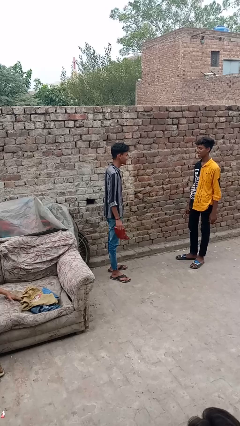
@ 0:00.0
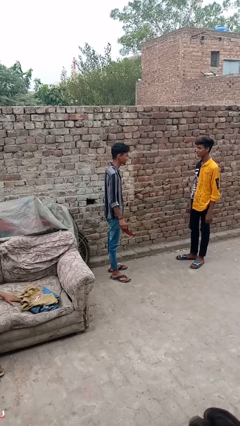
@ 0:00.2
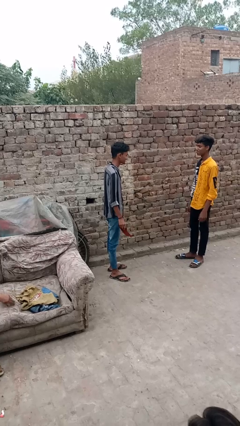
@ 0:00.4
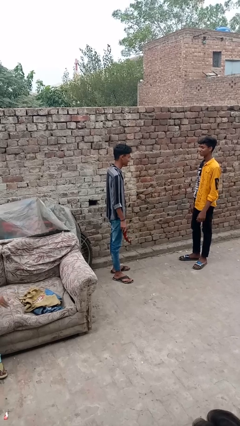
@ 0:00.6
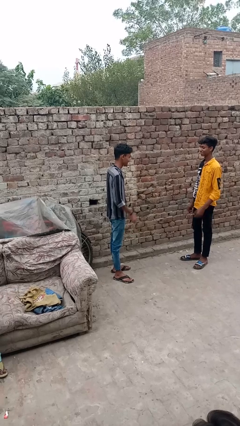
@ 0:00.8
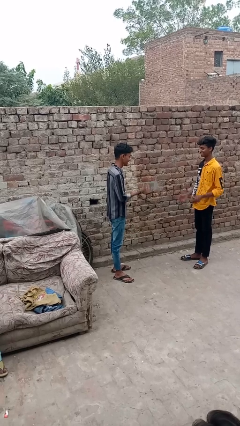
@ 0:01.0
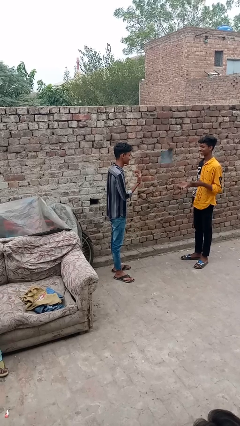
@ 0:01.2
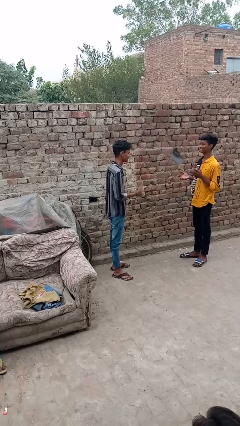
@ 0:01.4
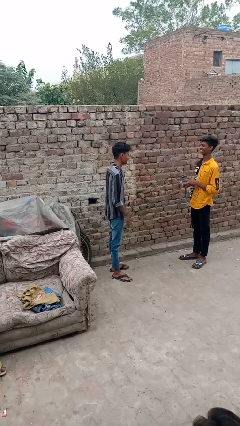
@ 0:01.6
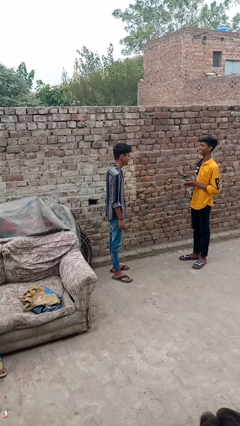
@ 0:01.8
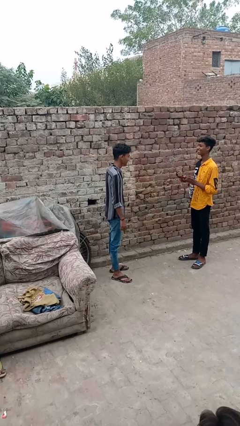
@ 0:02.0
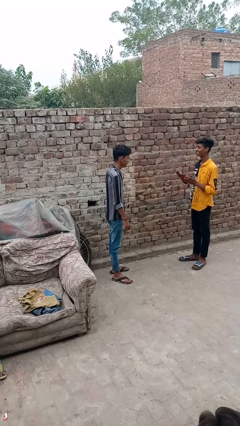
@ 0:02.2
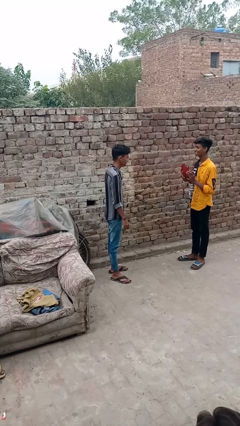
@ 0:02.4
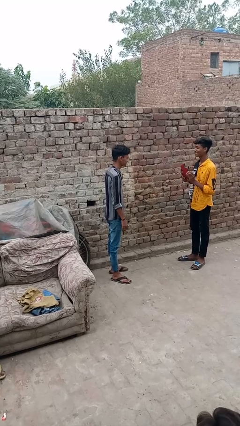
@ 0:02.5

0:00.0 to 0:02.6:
person throws object to person

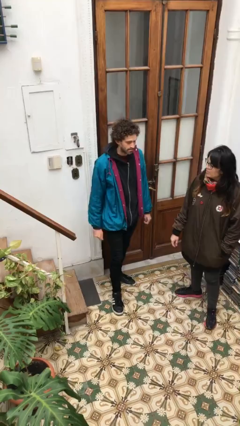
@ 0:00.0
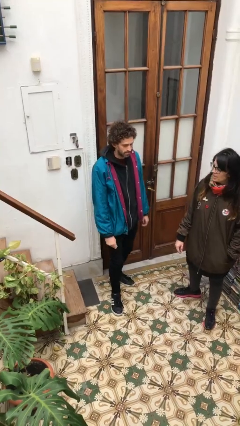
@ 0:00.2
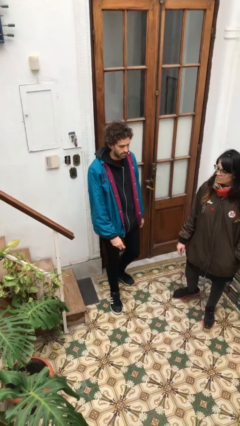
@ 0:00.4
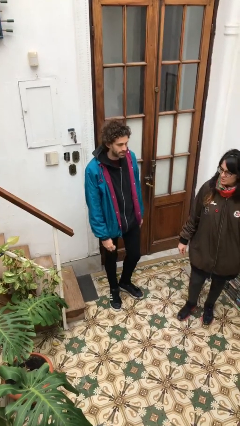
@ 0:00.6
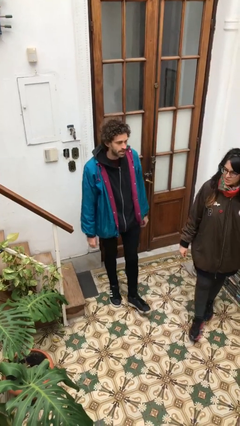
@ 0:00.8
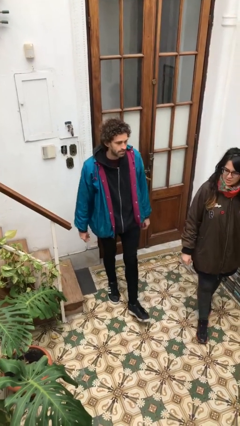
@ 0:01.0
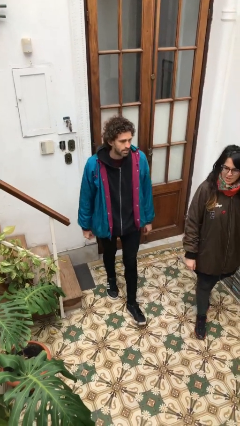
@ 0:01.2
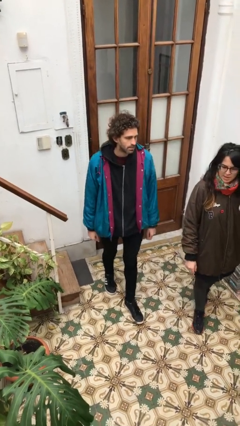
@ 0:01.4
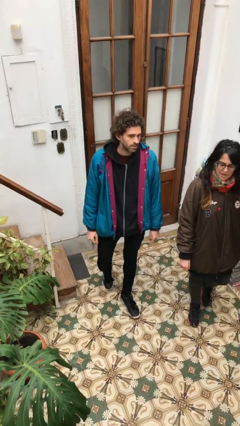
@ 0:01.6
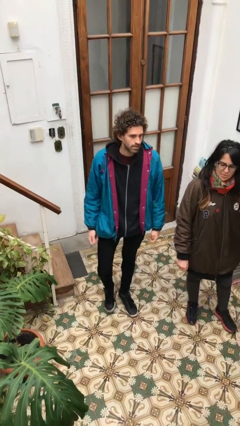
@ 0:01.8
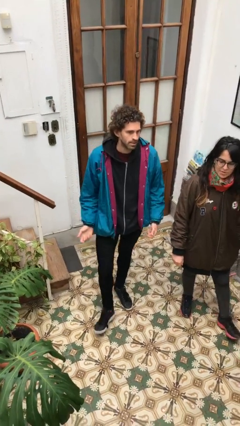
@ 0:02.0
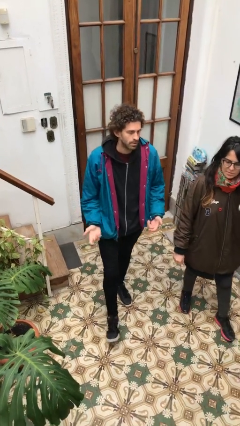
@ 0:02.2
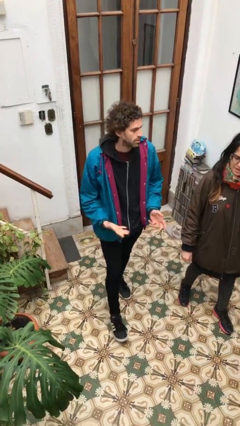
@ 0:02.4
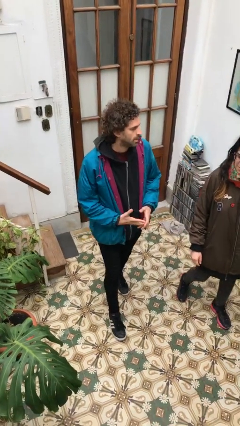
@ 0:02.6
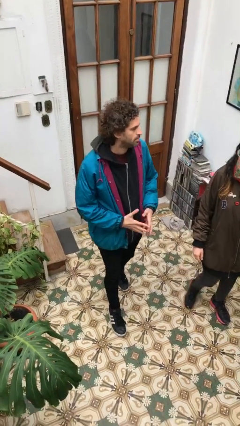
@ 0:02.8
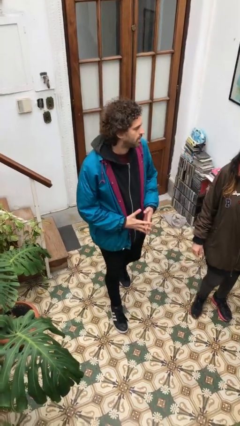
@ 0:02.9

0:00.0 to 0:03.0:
person talks to person

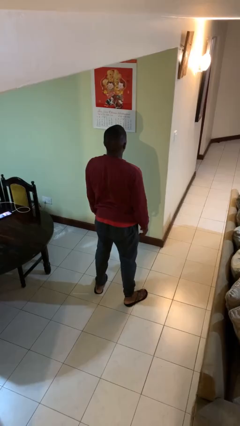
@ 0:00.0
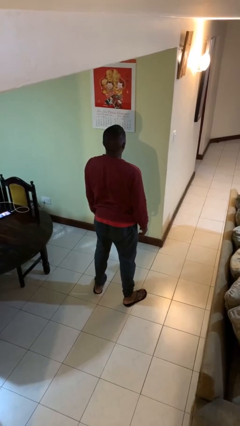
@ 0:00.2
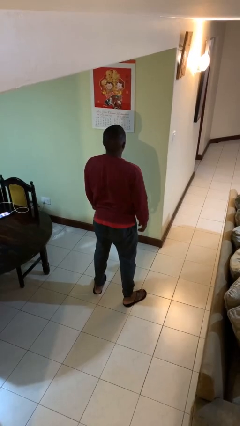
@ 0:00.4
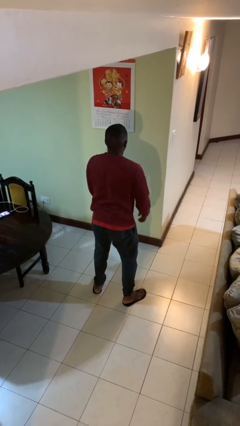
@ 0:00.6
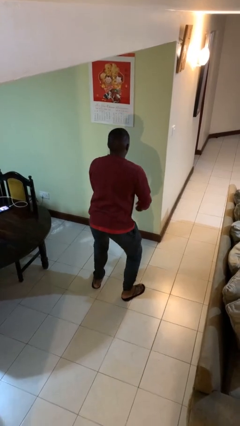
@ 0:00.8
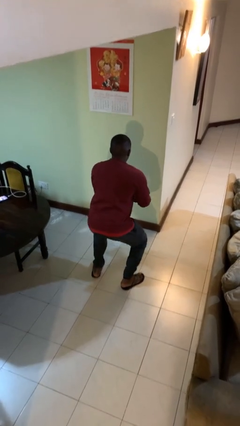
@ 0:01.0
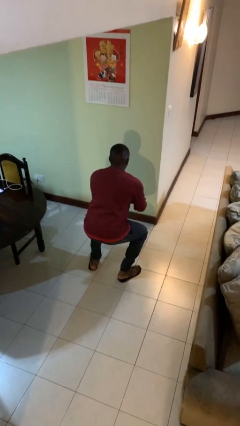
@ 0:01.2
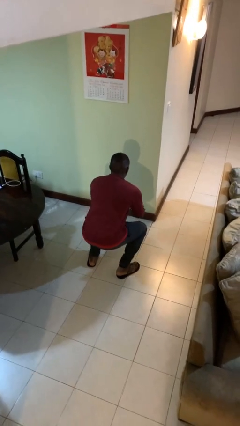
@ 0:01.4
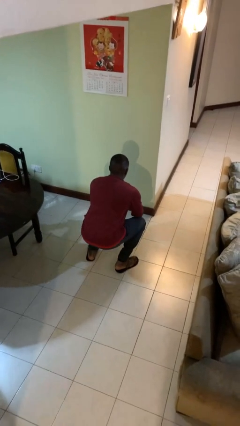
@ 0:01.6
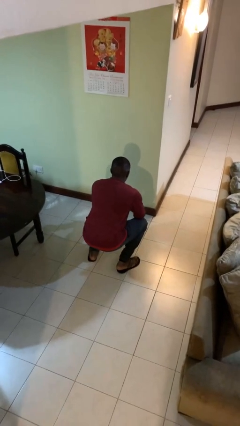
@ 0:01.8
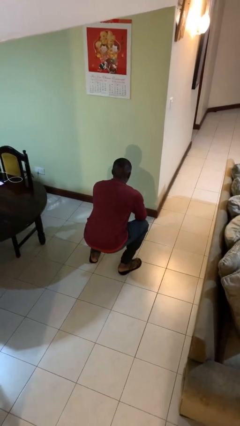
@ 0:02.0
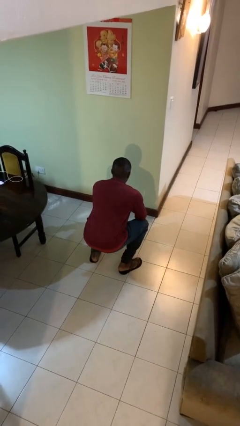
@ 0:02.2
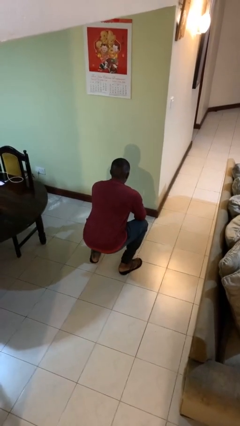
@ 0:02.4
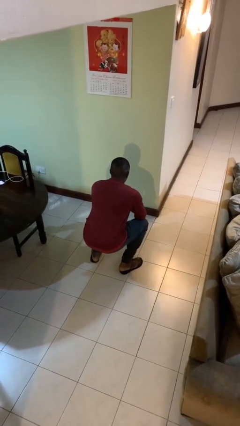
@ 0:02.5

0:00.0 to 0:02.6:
person squats

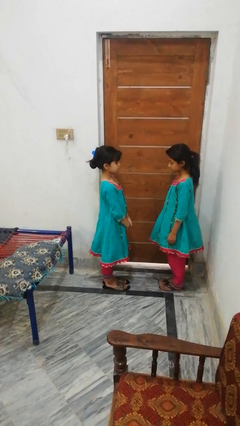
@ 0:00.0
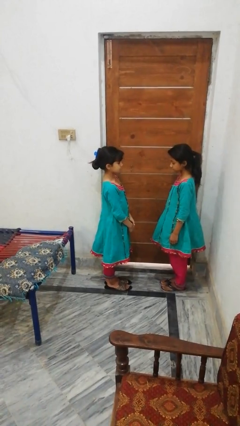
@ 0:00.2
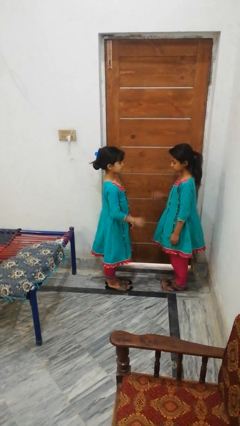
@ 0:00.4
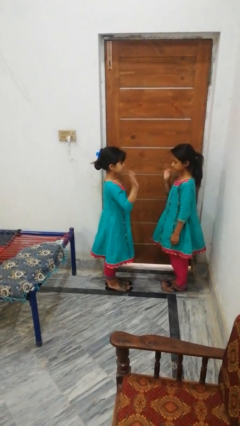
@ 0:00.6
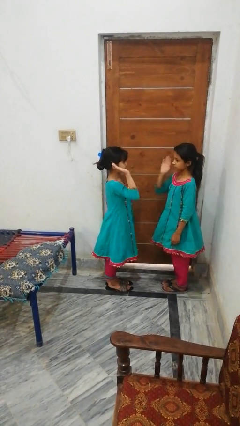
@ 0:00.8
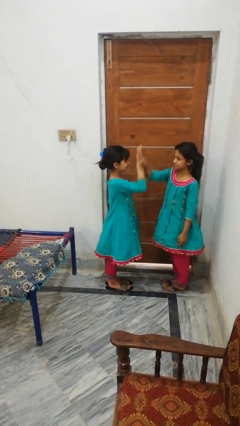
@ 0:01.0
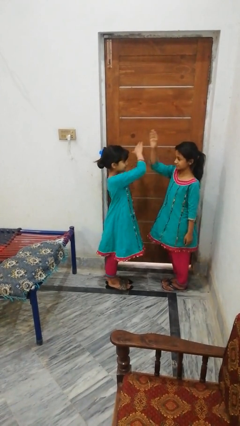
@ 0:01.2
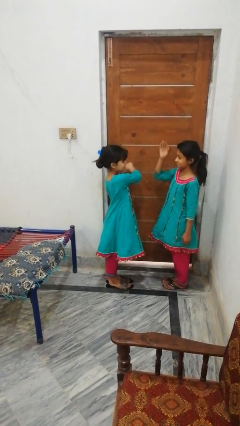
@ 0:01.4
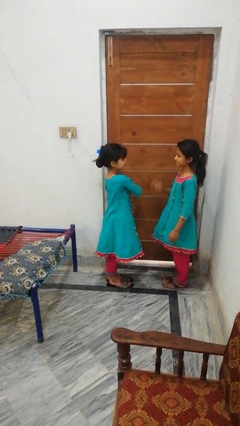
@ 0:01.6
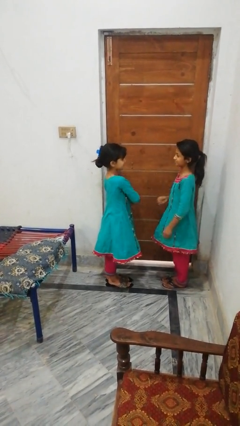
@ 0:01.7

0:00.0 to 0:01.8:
person highfives hand

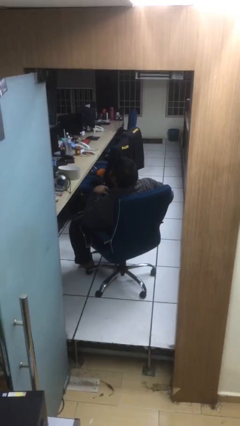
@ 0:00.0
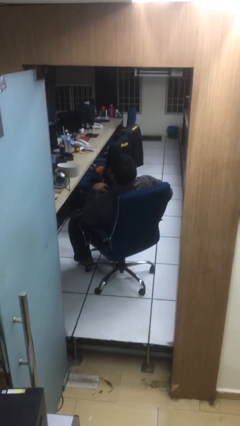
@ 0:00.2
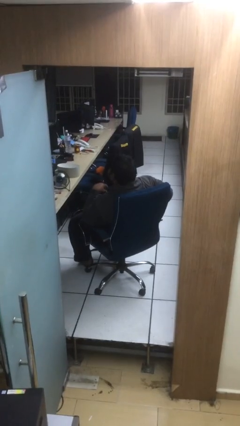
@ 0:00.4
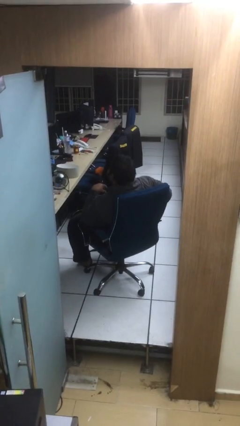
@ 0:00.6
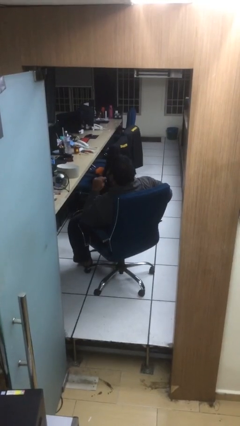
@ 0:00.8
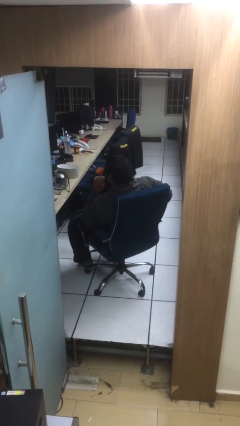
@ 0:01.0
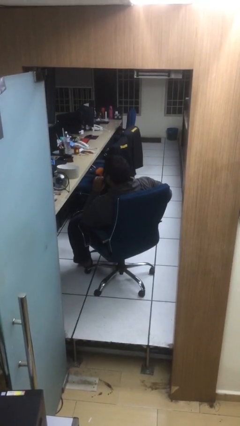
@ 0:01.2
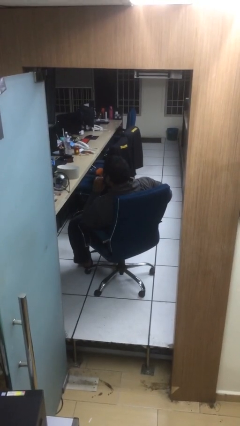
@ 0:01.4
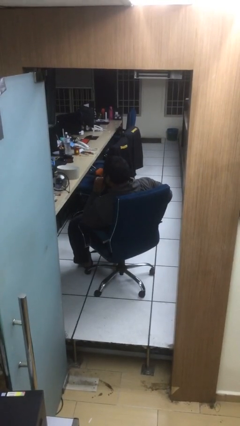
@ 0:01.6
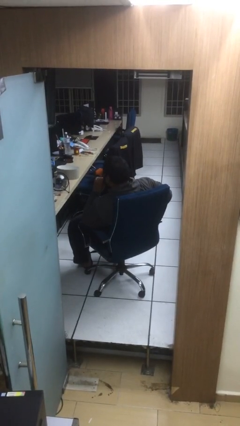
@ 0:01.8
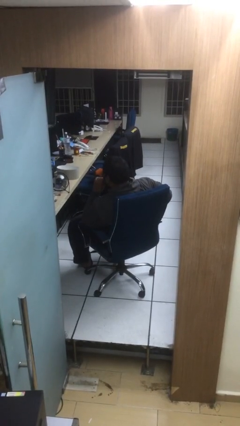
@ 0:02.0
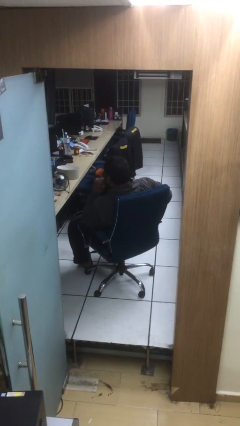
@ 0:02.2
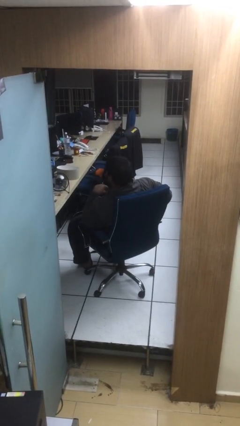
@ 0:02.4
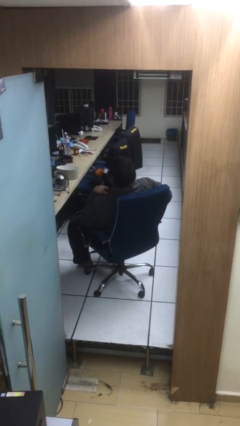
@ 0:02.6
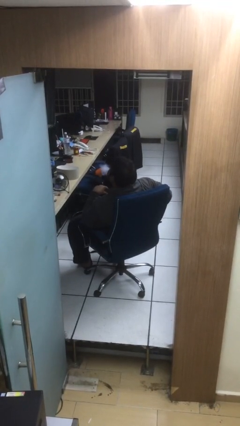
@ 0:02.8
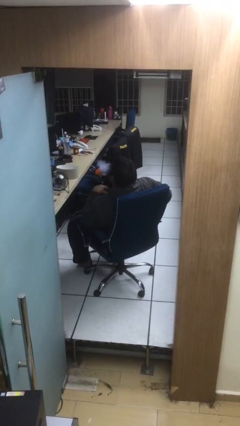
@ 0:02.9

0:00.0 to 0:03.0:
person vapes

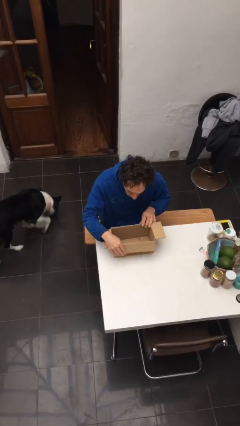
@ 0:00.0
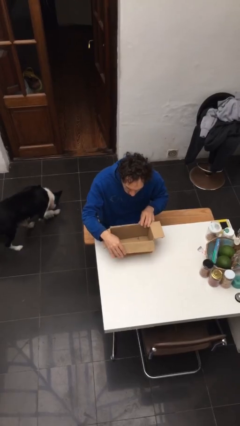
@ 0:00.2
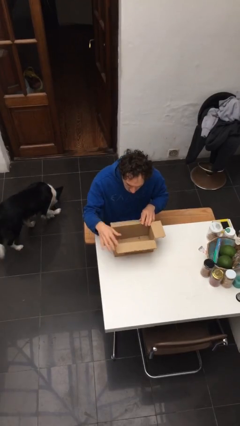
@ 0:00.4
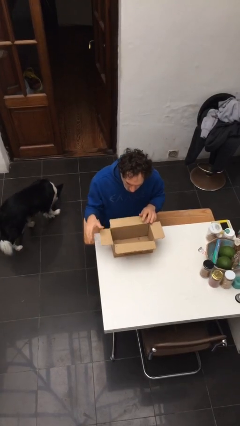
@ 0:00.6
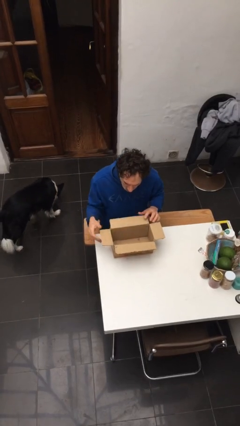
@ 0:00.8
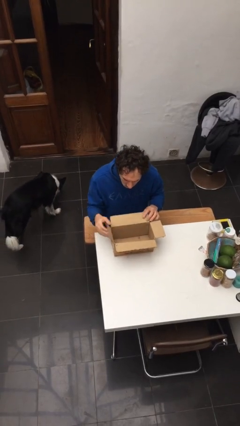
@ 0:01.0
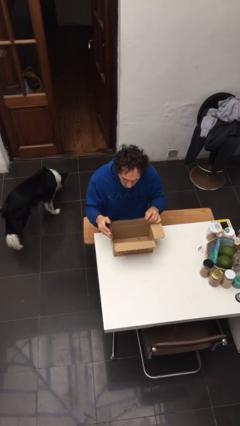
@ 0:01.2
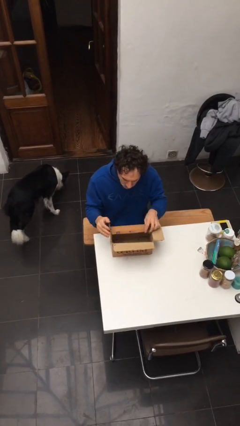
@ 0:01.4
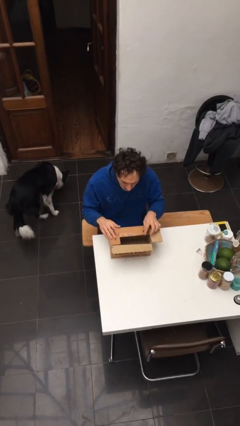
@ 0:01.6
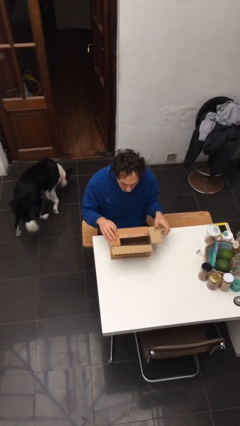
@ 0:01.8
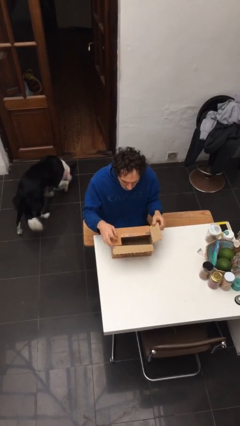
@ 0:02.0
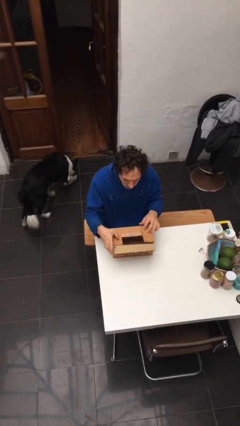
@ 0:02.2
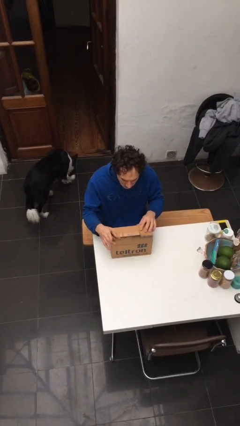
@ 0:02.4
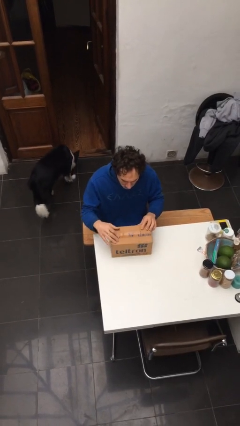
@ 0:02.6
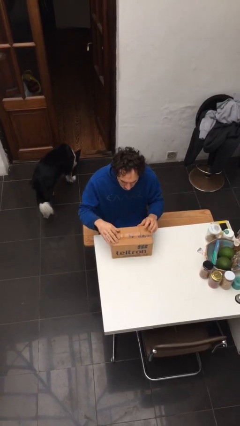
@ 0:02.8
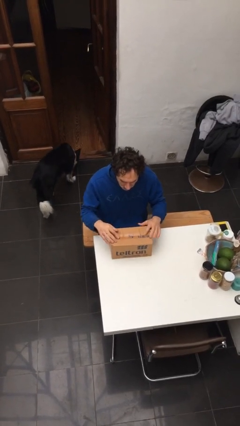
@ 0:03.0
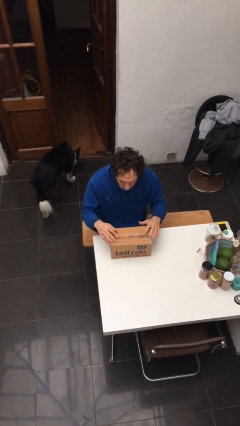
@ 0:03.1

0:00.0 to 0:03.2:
person closes box

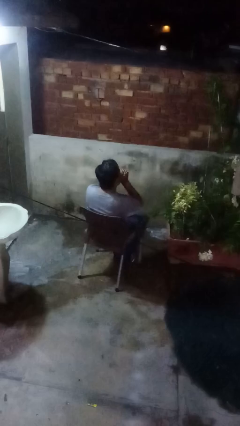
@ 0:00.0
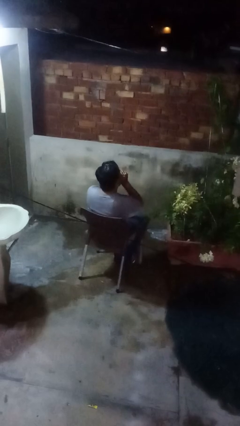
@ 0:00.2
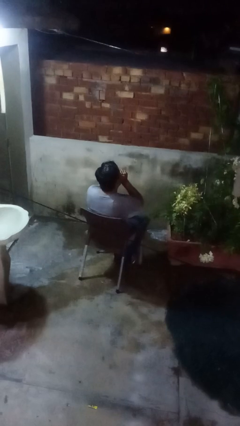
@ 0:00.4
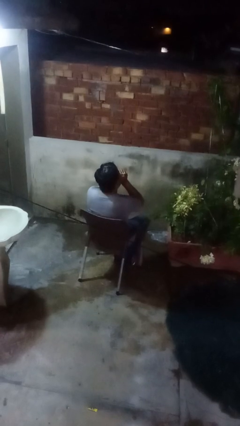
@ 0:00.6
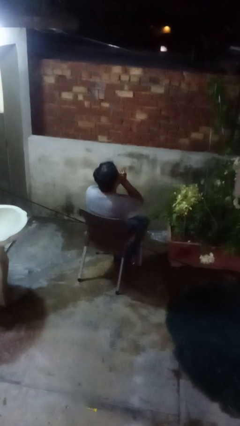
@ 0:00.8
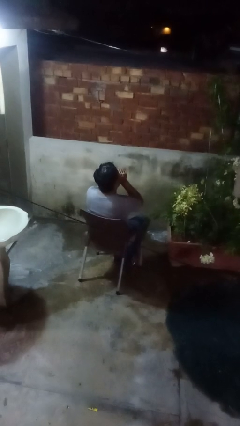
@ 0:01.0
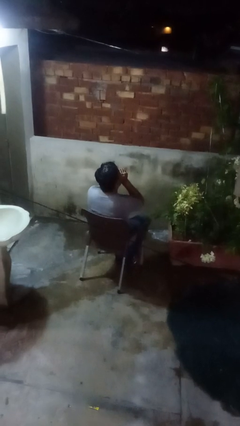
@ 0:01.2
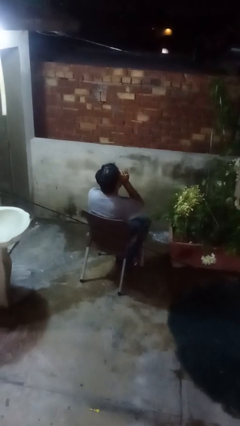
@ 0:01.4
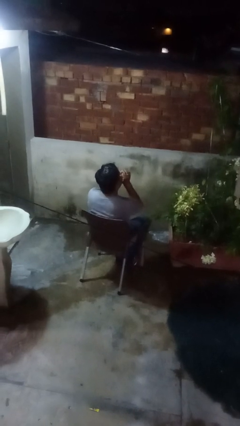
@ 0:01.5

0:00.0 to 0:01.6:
person blows into hands
